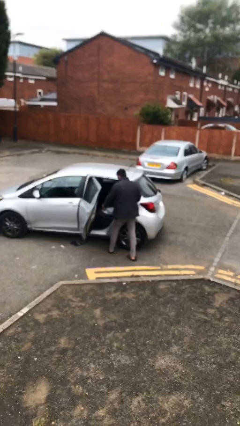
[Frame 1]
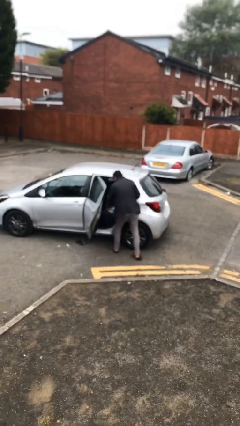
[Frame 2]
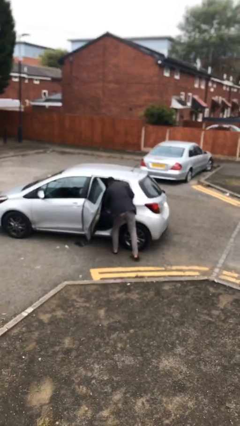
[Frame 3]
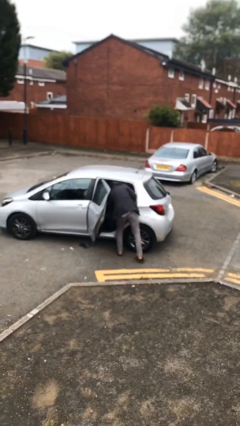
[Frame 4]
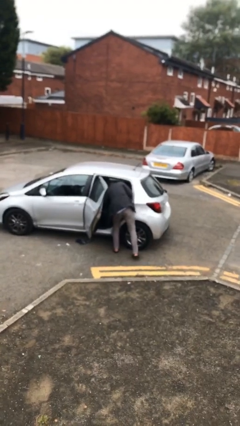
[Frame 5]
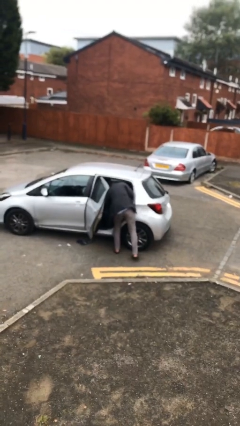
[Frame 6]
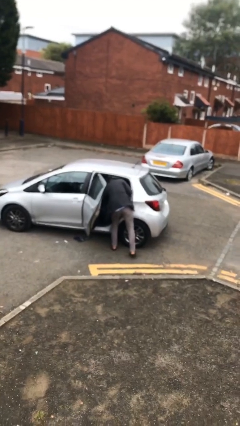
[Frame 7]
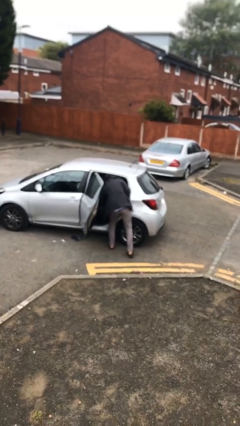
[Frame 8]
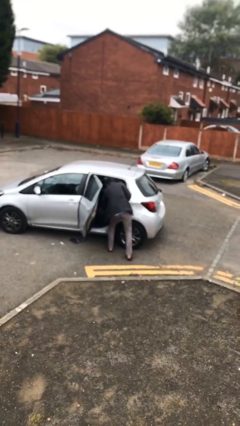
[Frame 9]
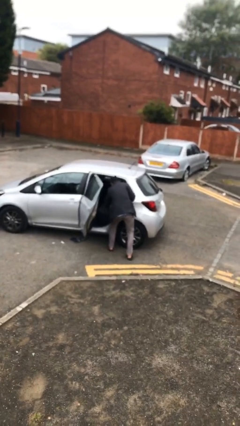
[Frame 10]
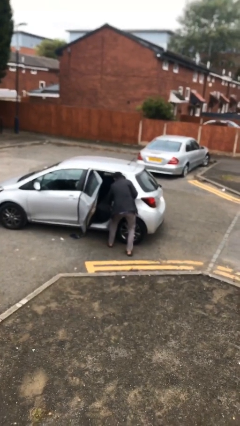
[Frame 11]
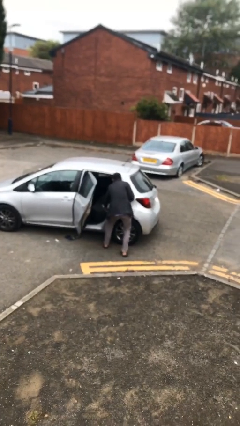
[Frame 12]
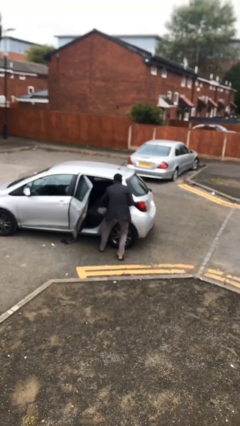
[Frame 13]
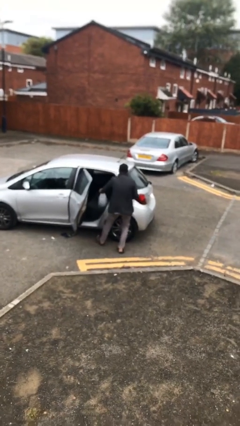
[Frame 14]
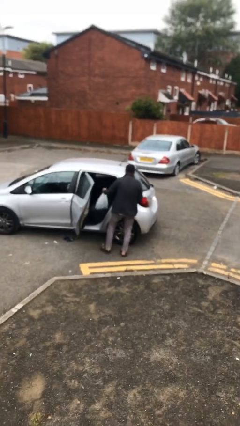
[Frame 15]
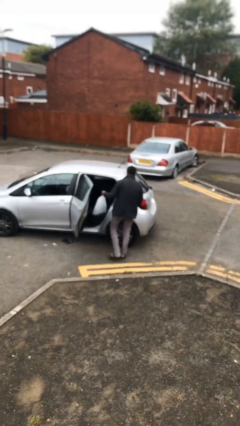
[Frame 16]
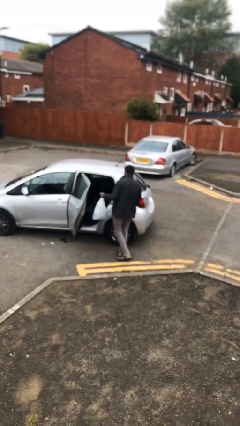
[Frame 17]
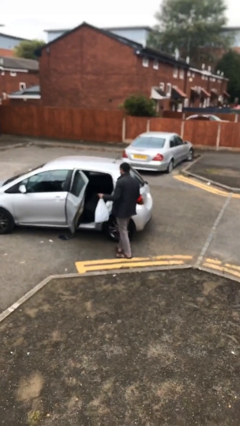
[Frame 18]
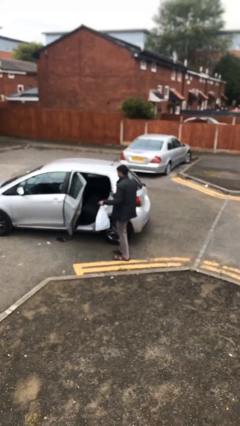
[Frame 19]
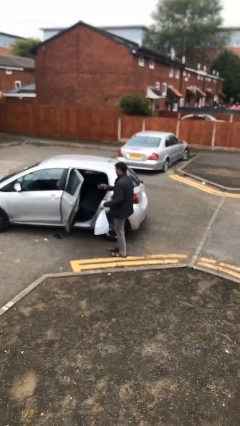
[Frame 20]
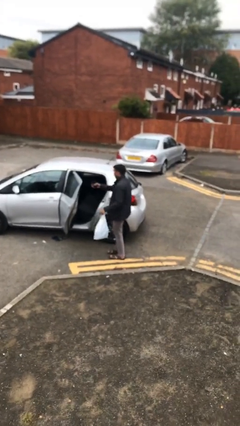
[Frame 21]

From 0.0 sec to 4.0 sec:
person unloads car

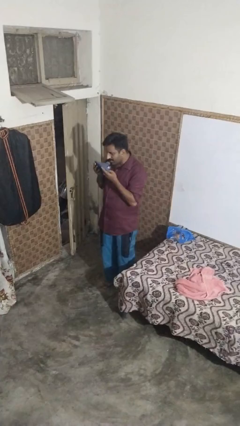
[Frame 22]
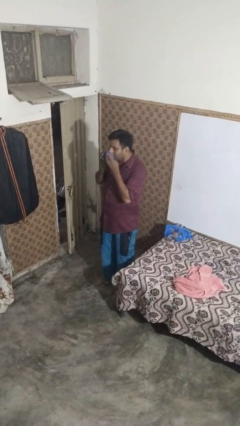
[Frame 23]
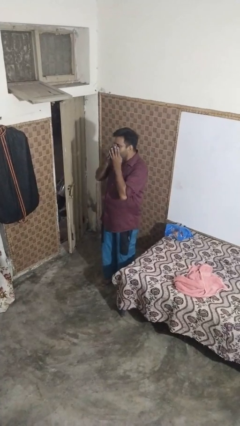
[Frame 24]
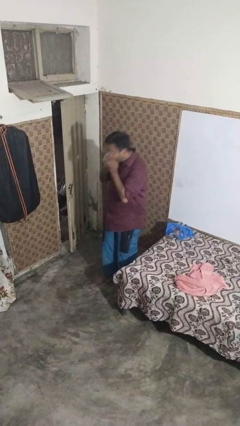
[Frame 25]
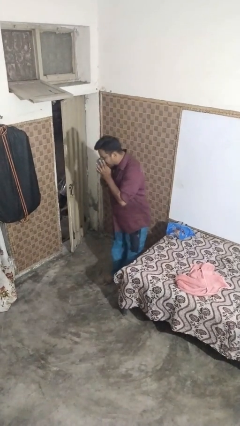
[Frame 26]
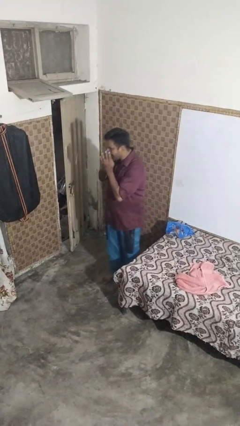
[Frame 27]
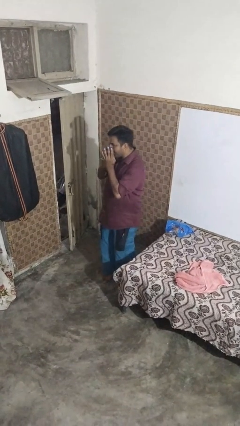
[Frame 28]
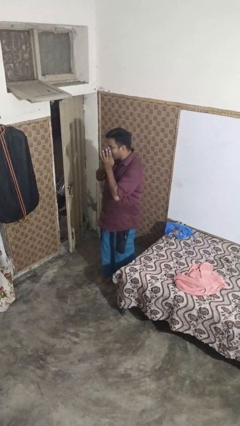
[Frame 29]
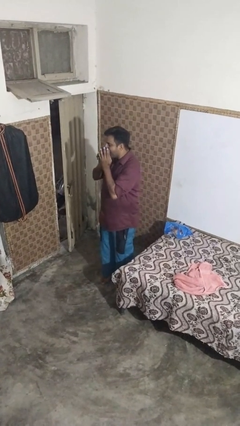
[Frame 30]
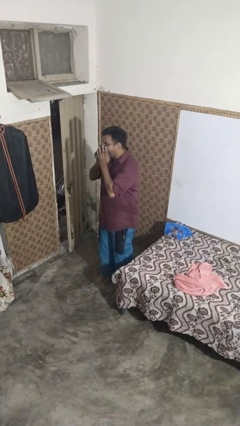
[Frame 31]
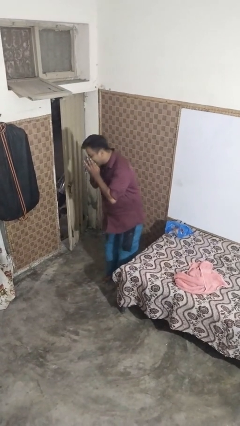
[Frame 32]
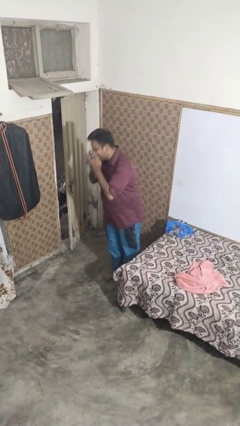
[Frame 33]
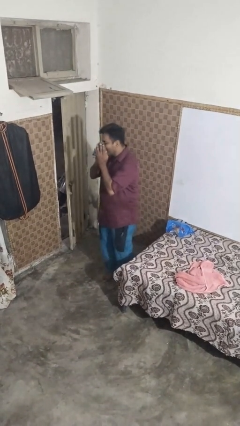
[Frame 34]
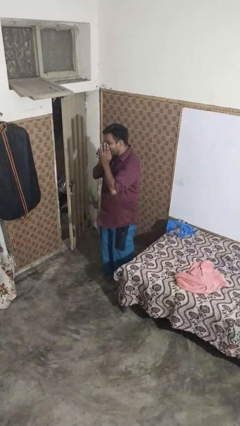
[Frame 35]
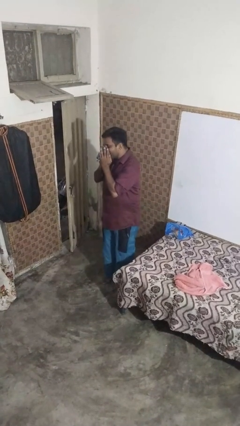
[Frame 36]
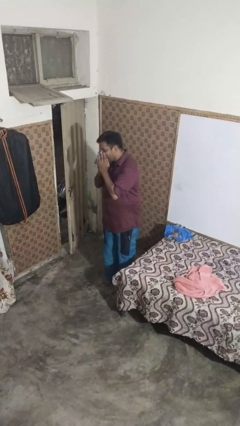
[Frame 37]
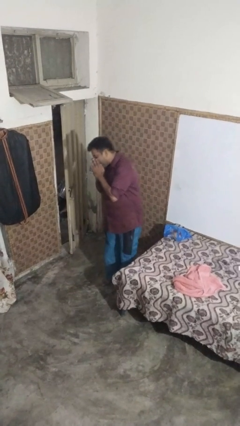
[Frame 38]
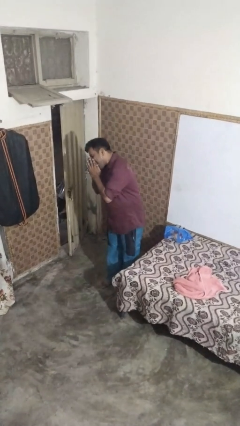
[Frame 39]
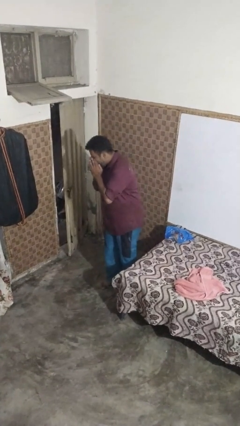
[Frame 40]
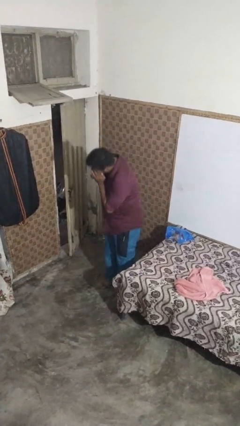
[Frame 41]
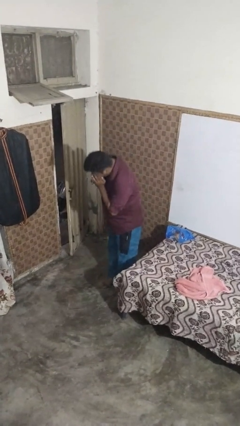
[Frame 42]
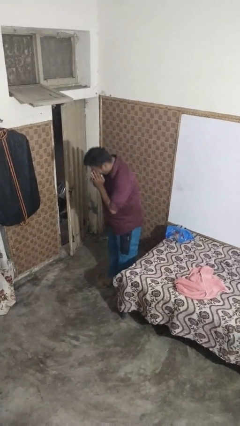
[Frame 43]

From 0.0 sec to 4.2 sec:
person blows nose

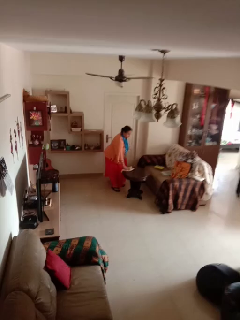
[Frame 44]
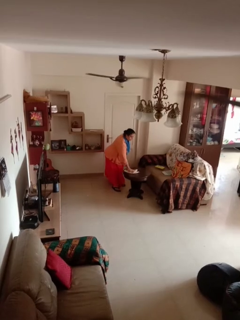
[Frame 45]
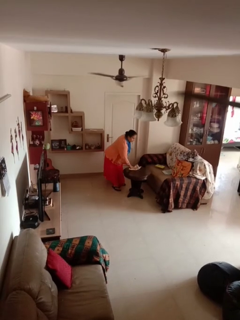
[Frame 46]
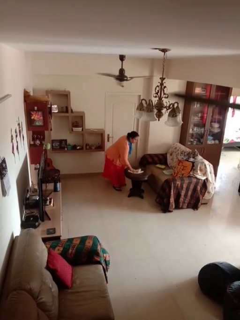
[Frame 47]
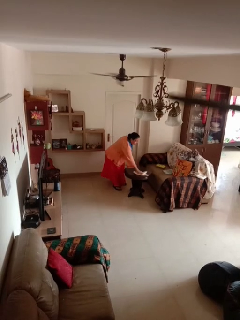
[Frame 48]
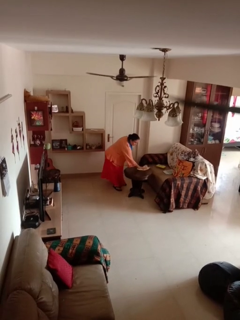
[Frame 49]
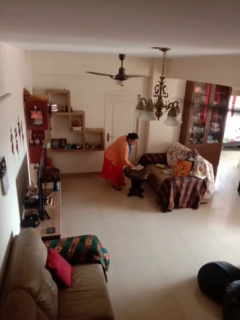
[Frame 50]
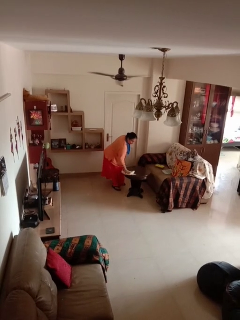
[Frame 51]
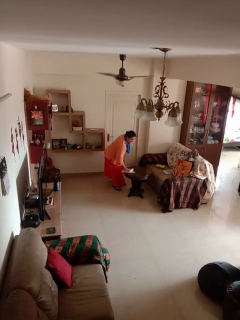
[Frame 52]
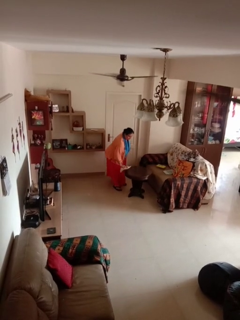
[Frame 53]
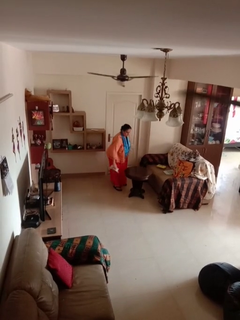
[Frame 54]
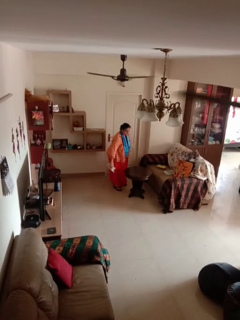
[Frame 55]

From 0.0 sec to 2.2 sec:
person cleans table with rag

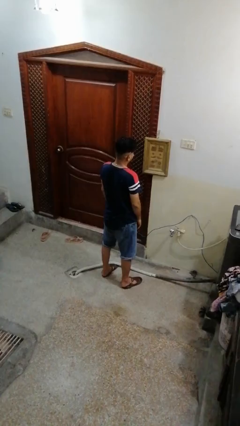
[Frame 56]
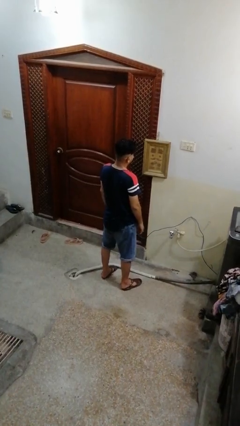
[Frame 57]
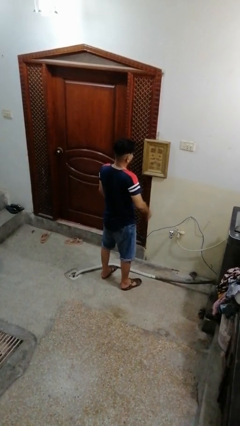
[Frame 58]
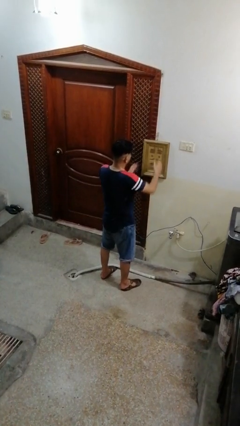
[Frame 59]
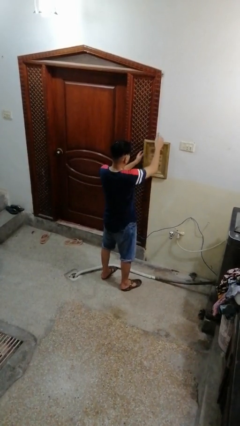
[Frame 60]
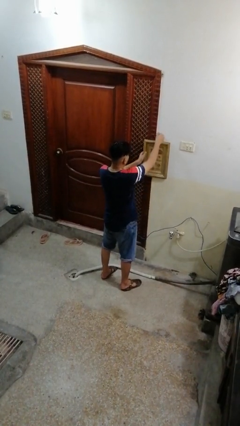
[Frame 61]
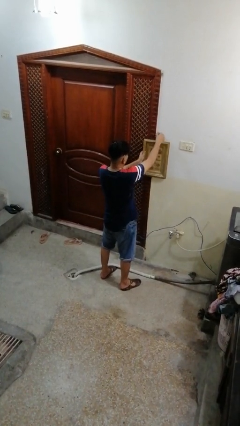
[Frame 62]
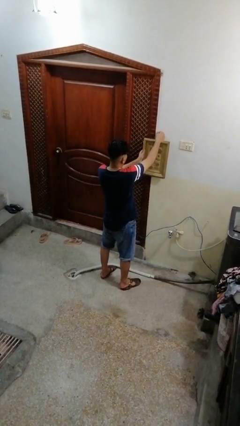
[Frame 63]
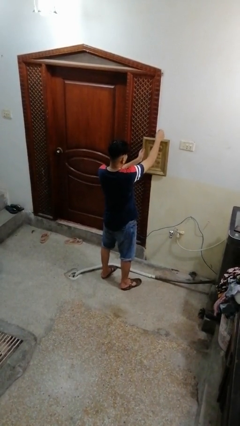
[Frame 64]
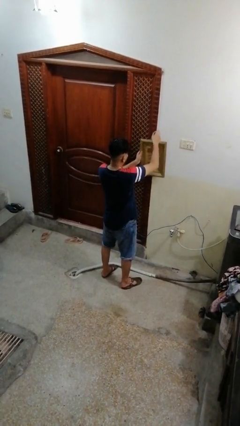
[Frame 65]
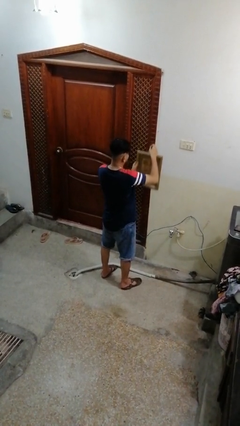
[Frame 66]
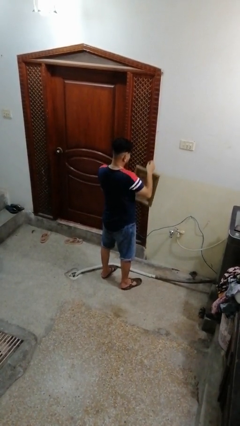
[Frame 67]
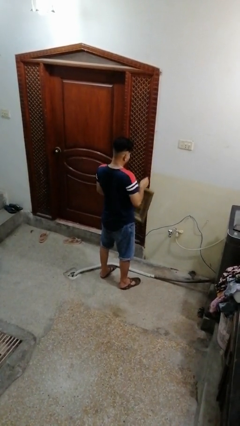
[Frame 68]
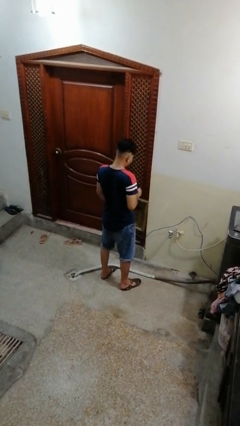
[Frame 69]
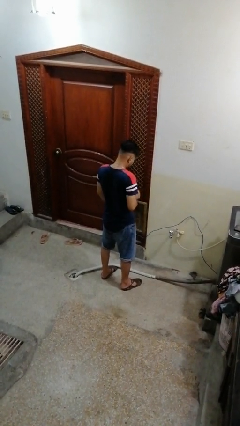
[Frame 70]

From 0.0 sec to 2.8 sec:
person takes down picture frame

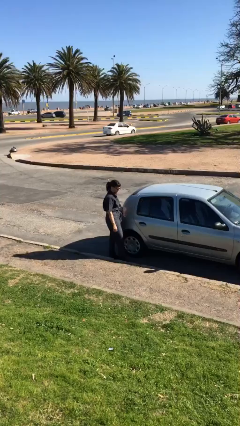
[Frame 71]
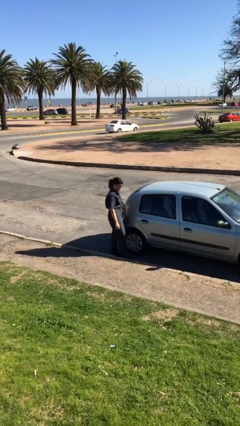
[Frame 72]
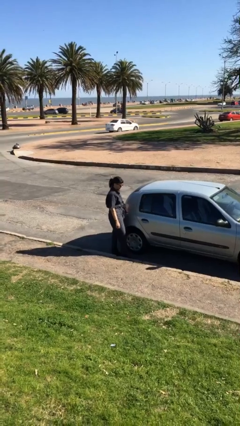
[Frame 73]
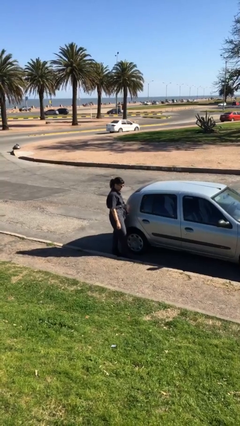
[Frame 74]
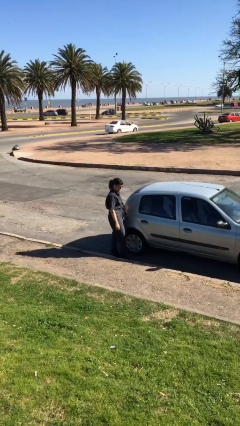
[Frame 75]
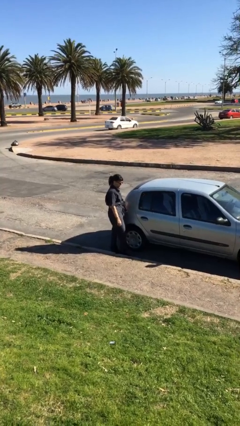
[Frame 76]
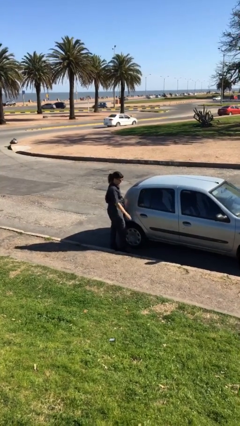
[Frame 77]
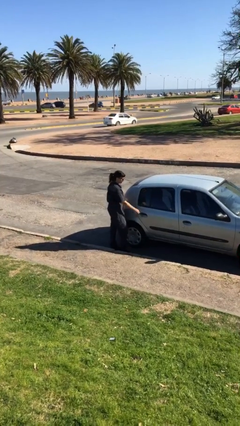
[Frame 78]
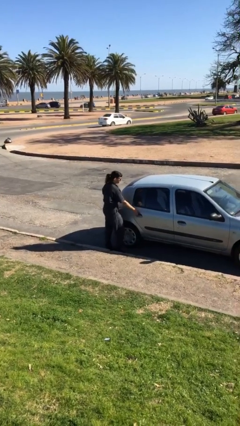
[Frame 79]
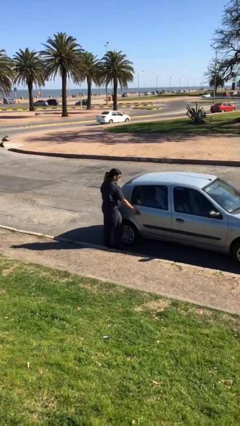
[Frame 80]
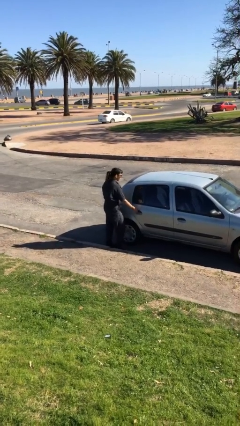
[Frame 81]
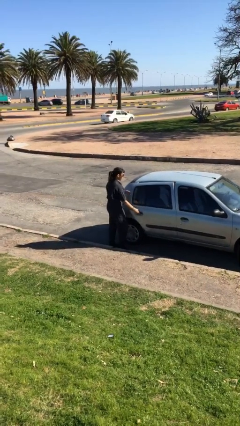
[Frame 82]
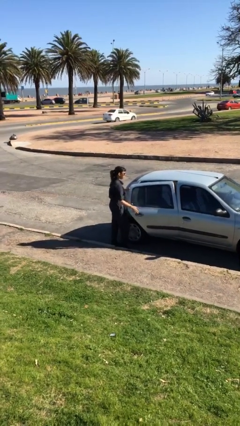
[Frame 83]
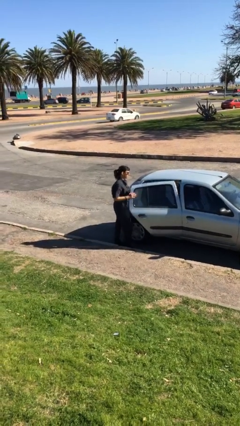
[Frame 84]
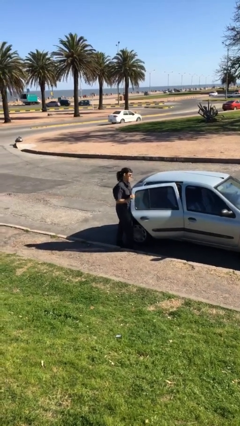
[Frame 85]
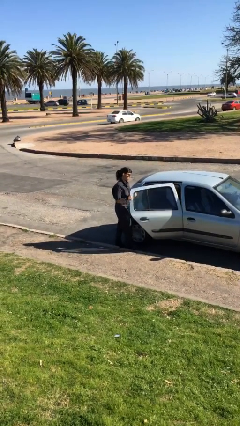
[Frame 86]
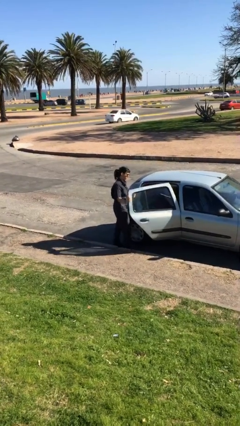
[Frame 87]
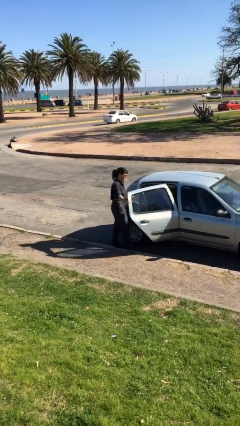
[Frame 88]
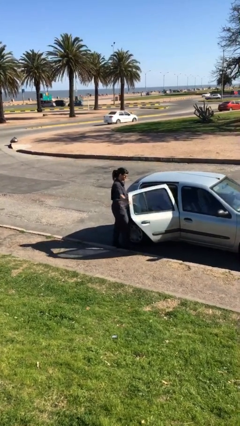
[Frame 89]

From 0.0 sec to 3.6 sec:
person opens car door

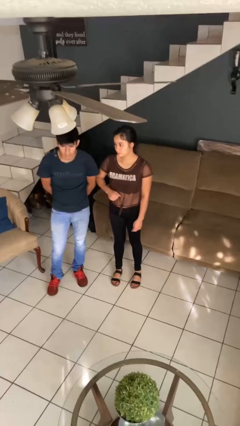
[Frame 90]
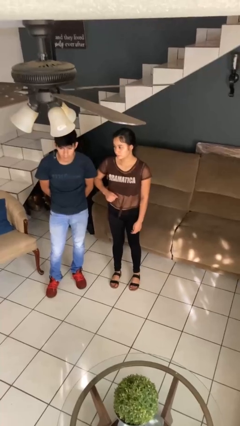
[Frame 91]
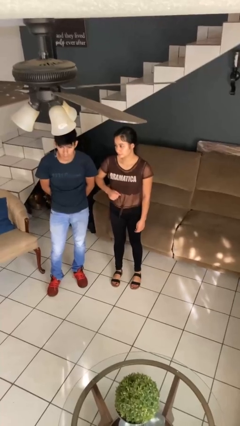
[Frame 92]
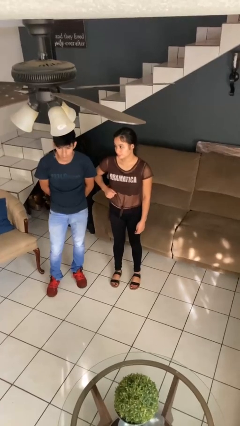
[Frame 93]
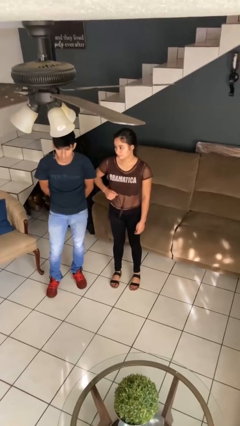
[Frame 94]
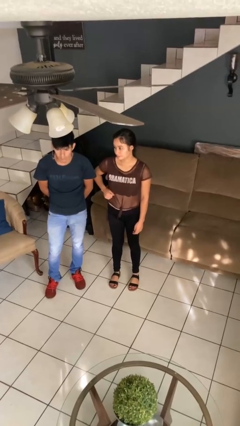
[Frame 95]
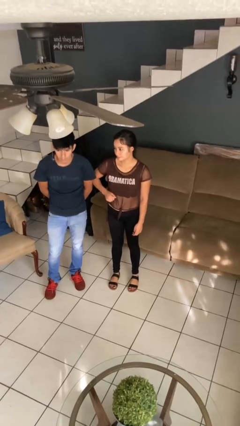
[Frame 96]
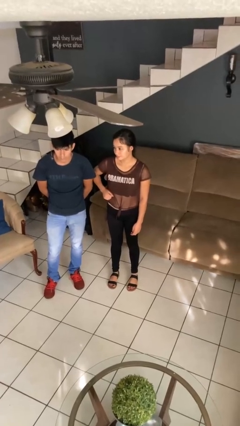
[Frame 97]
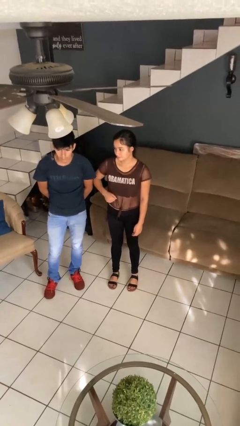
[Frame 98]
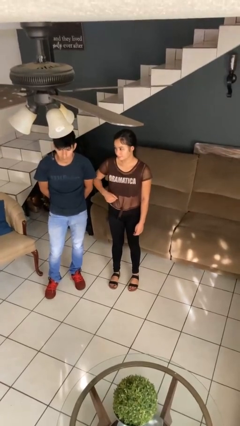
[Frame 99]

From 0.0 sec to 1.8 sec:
person nudges person with elbow
